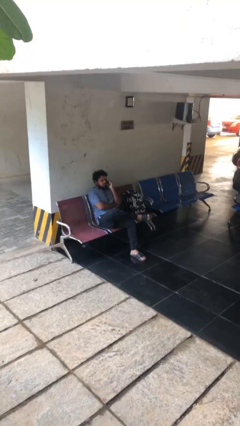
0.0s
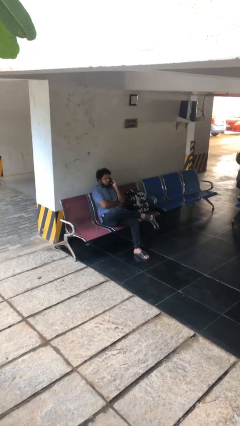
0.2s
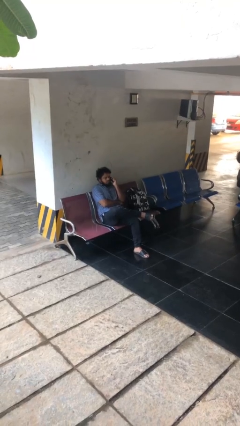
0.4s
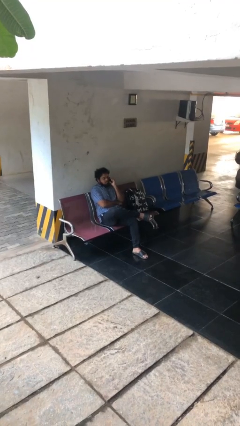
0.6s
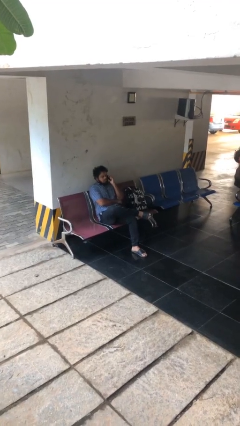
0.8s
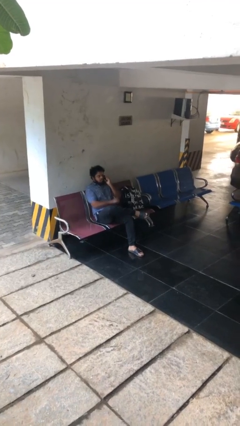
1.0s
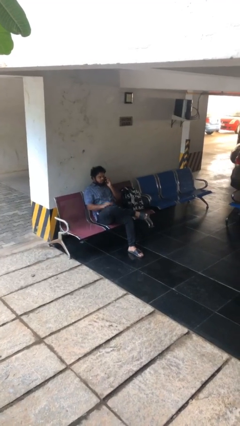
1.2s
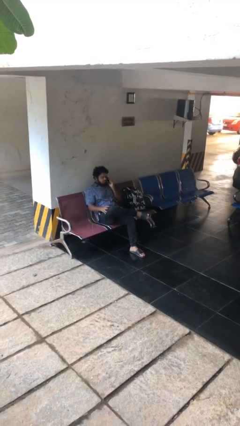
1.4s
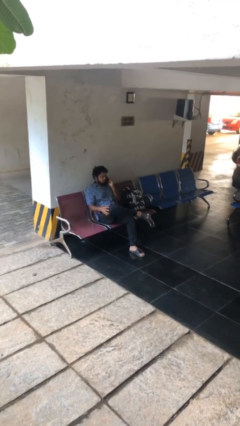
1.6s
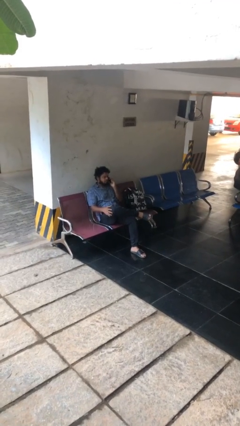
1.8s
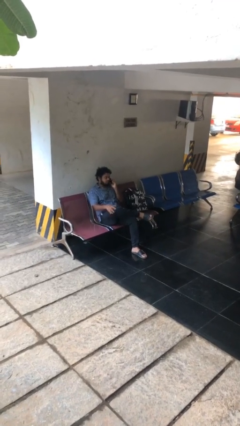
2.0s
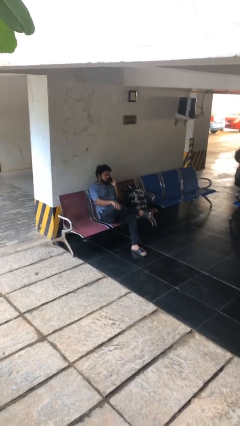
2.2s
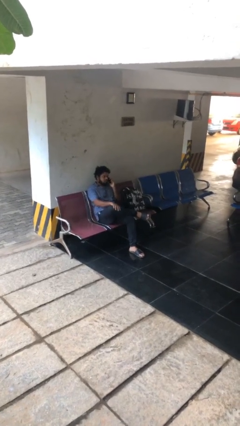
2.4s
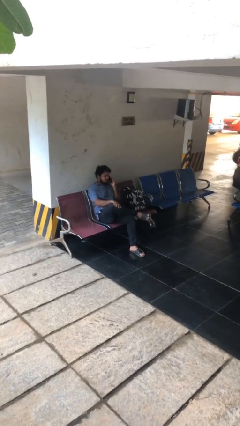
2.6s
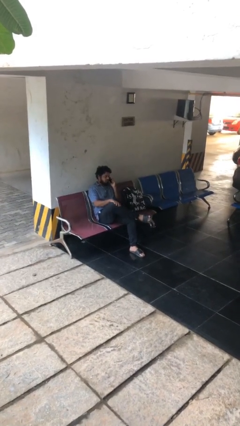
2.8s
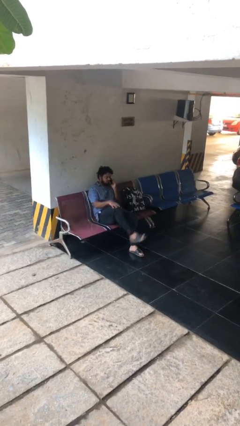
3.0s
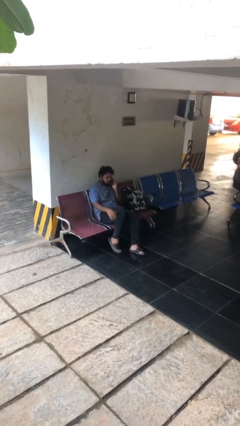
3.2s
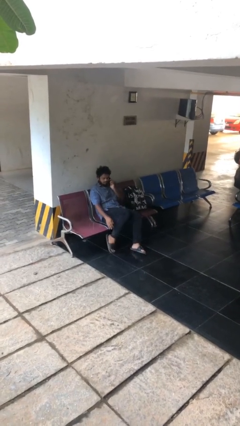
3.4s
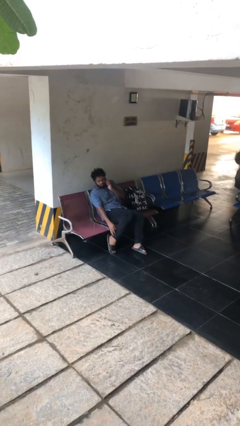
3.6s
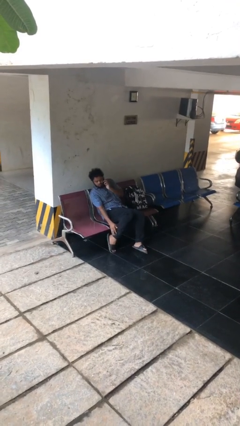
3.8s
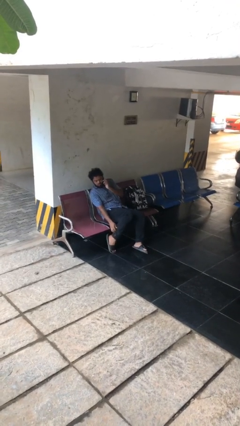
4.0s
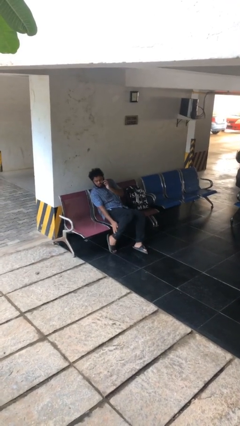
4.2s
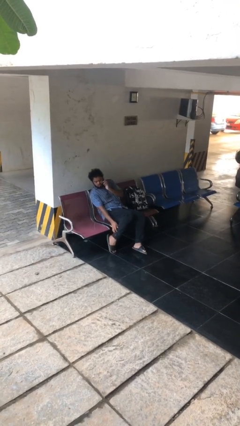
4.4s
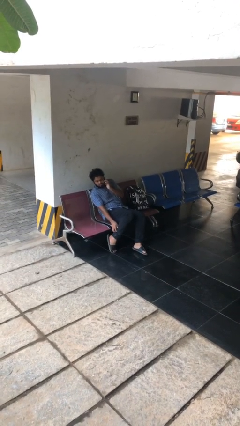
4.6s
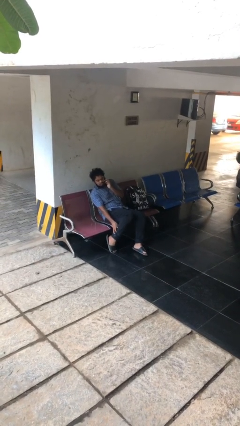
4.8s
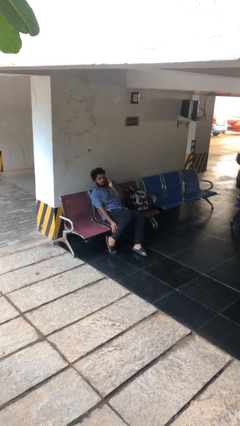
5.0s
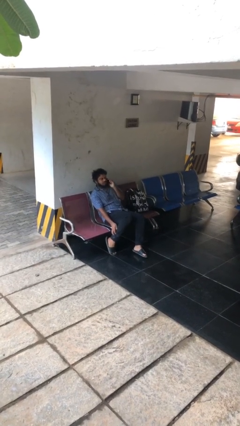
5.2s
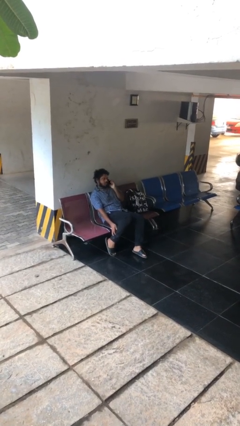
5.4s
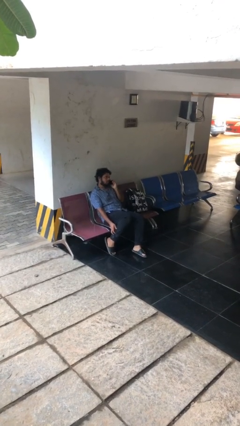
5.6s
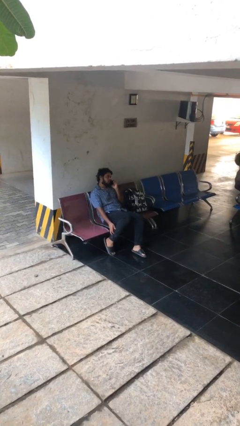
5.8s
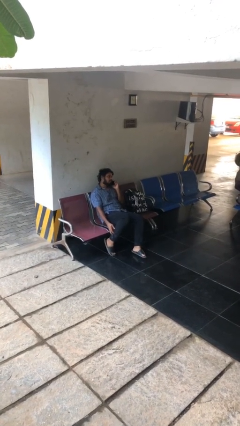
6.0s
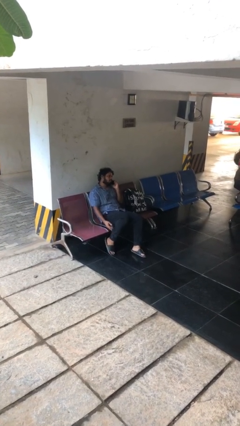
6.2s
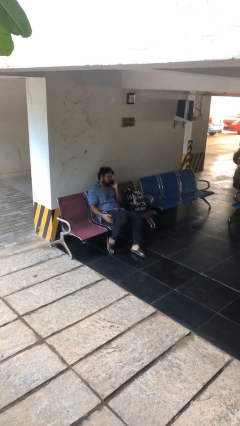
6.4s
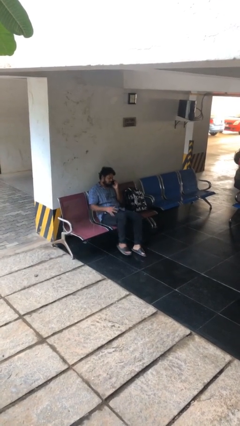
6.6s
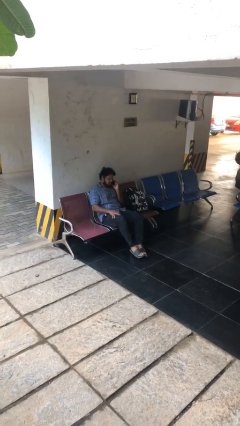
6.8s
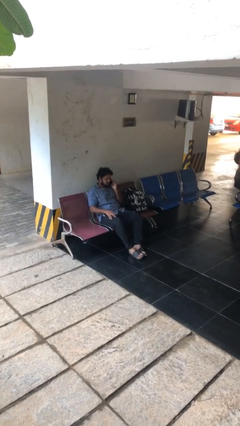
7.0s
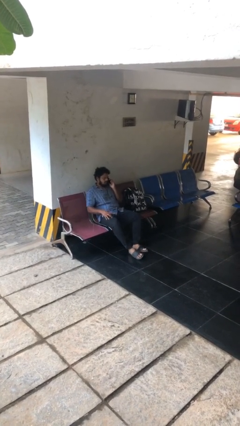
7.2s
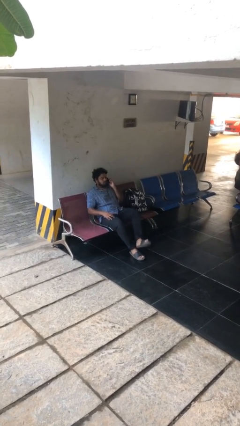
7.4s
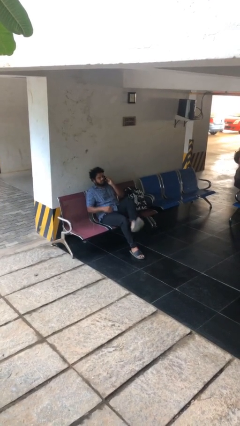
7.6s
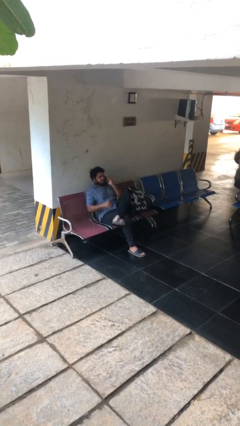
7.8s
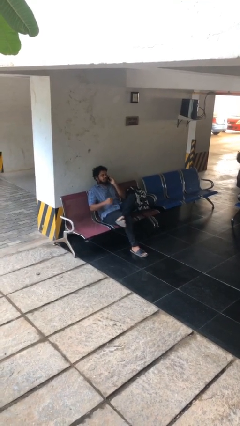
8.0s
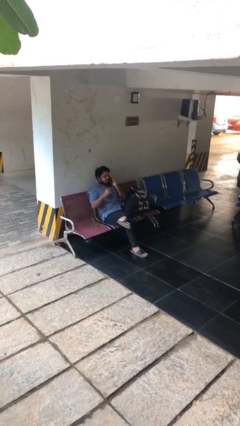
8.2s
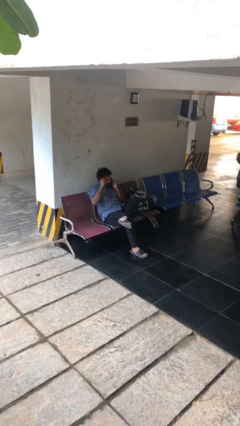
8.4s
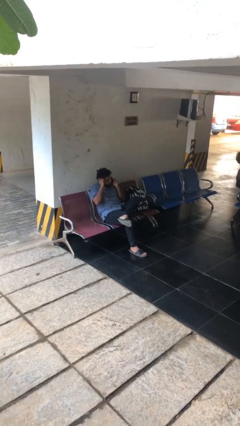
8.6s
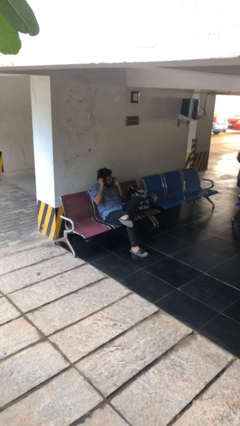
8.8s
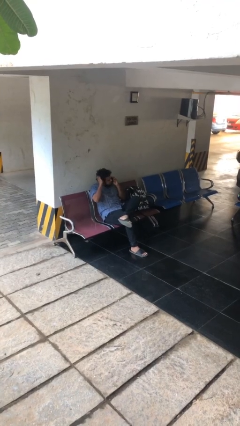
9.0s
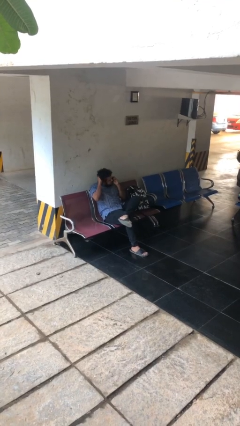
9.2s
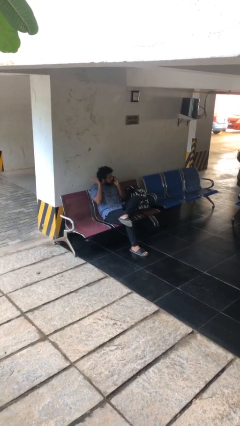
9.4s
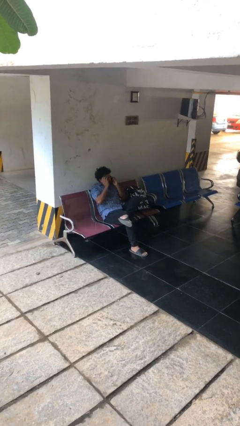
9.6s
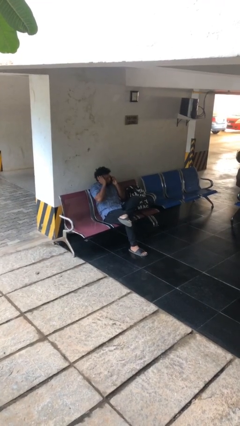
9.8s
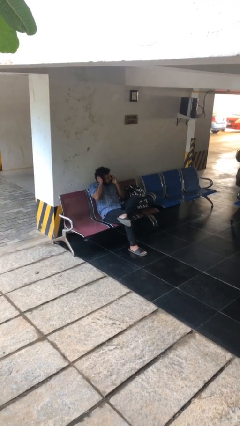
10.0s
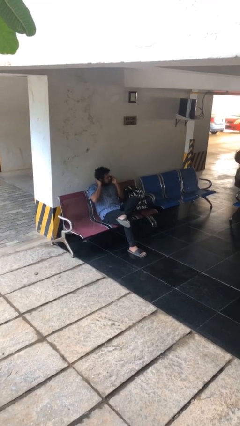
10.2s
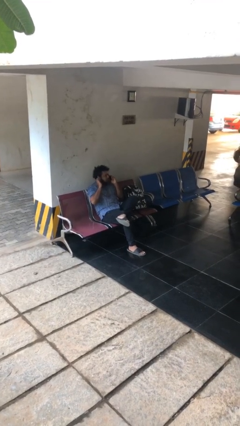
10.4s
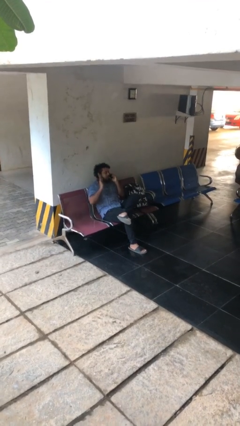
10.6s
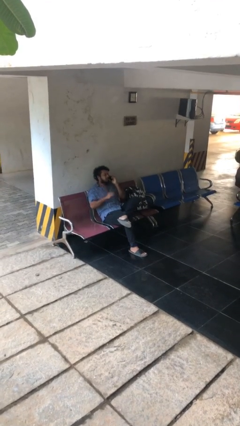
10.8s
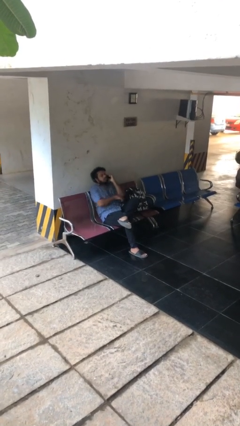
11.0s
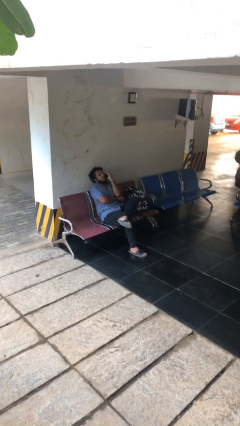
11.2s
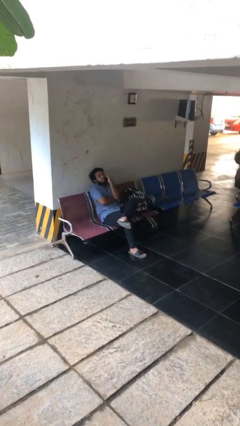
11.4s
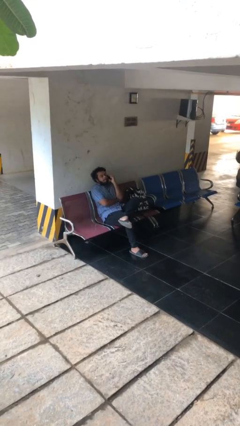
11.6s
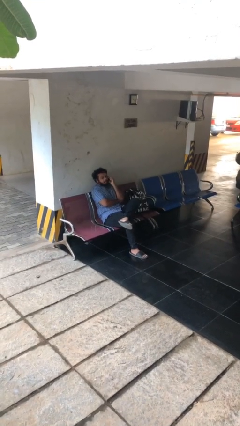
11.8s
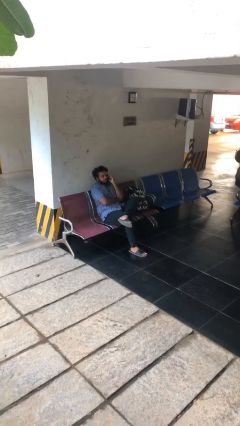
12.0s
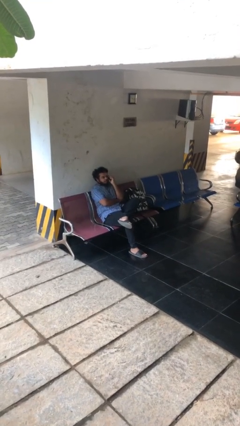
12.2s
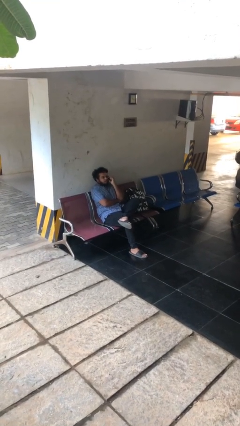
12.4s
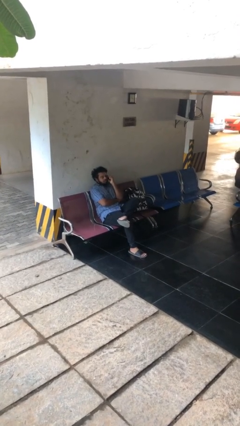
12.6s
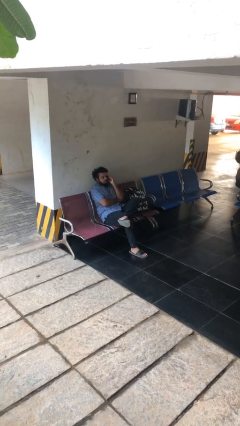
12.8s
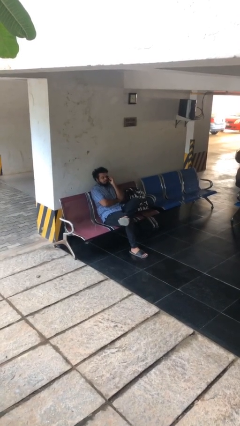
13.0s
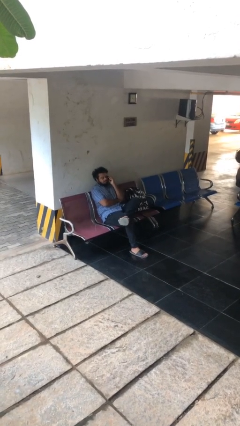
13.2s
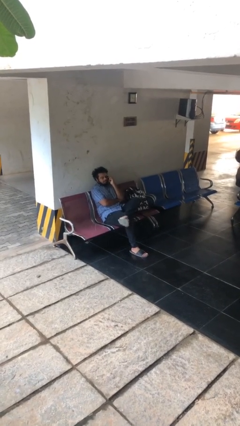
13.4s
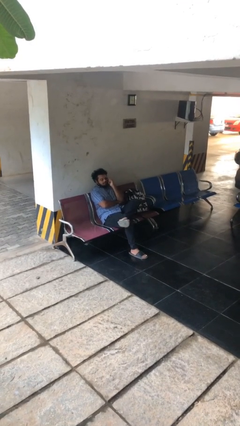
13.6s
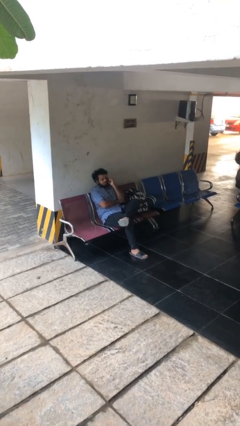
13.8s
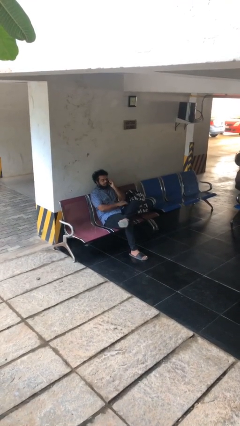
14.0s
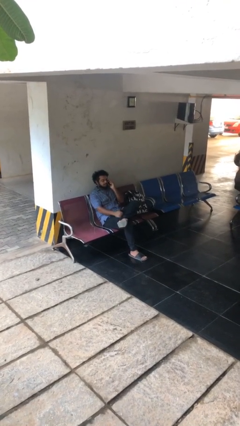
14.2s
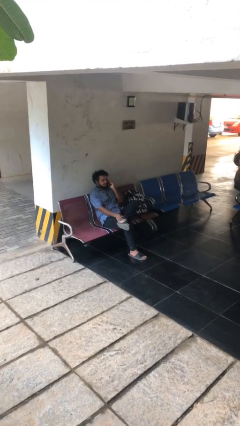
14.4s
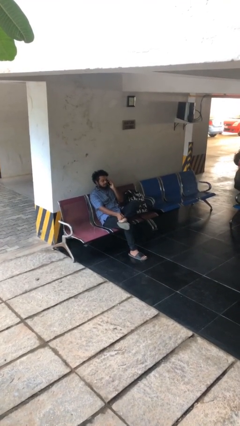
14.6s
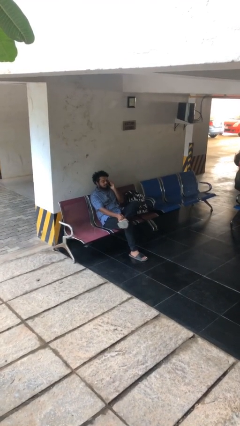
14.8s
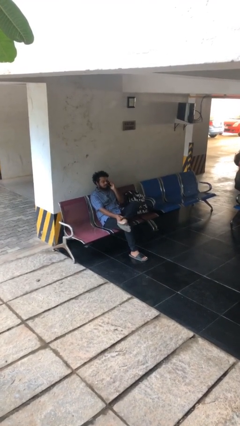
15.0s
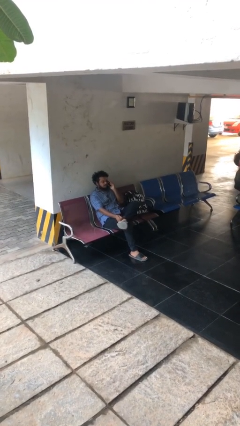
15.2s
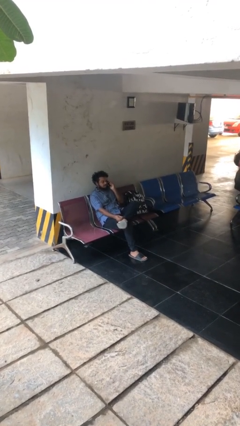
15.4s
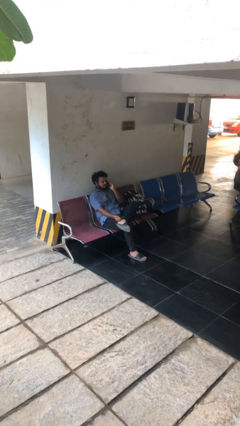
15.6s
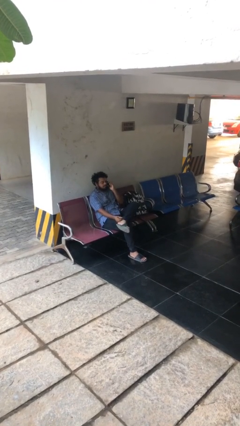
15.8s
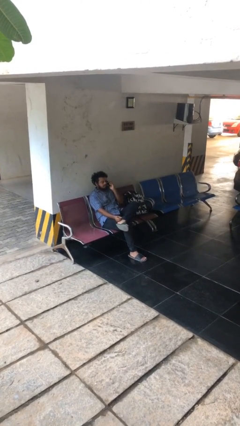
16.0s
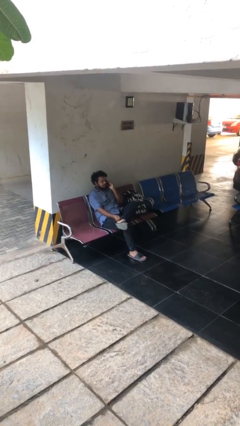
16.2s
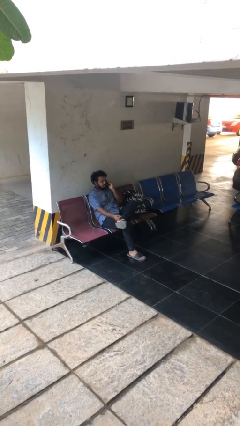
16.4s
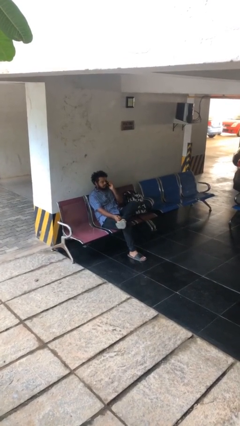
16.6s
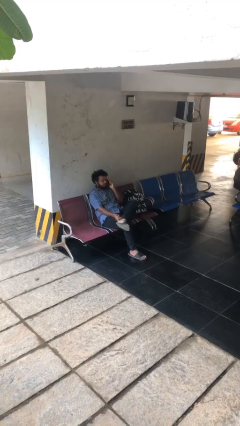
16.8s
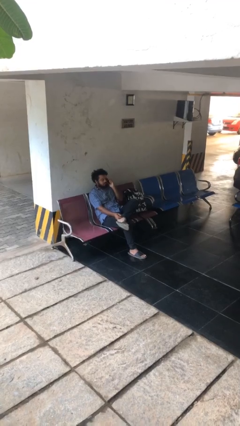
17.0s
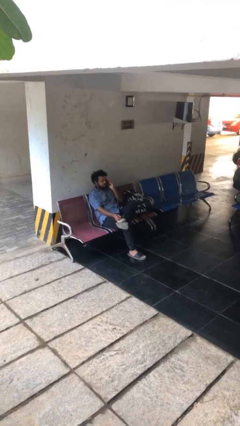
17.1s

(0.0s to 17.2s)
person talks on phone

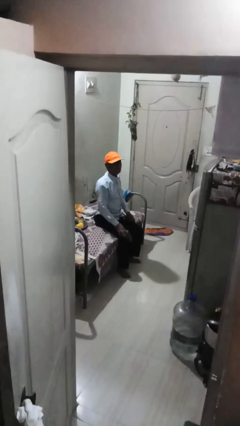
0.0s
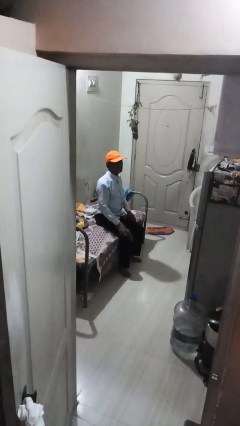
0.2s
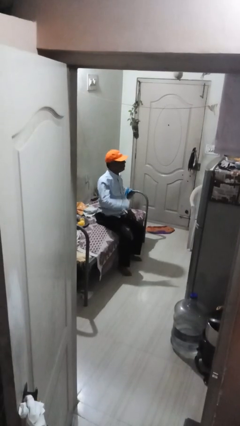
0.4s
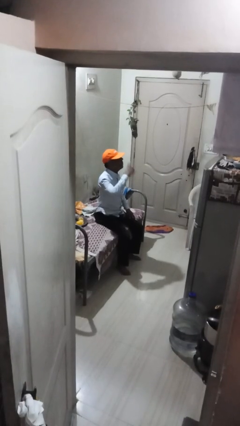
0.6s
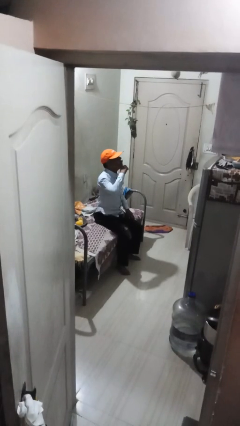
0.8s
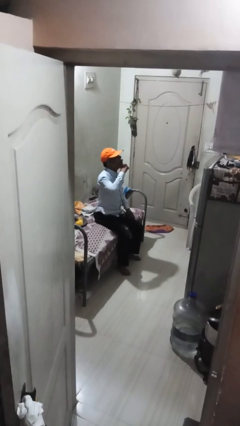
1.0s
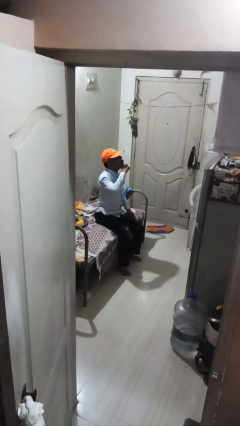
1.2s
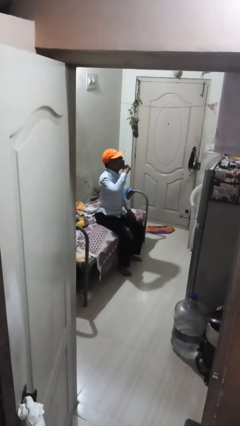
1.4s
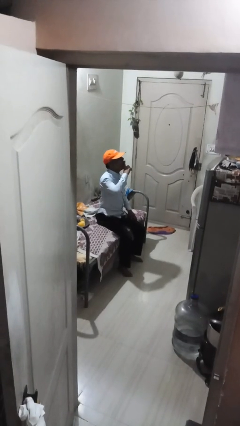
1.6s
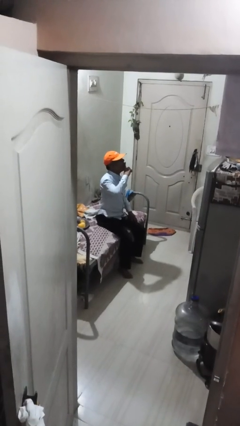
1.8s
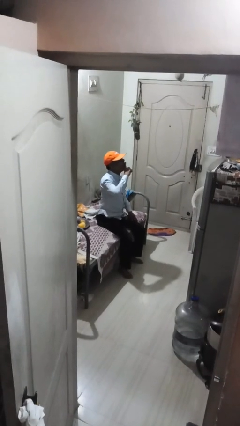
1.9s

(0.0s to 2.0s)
person gestures be quiet
